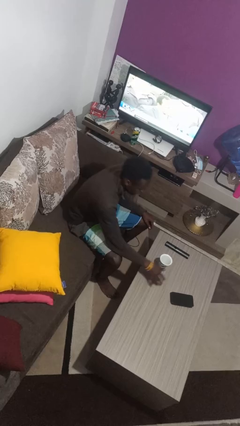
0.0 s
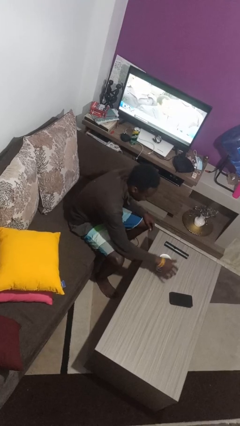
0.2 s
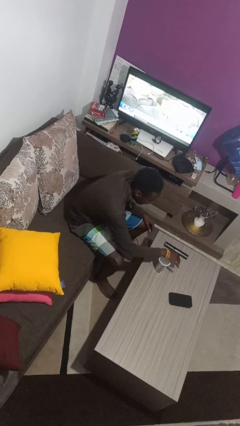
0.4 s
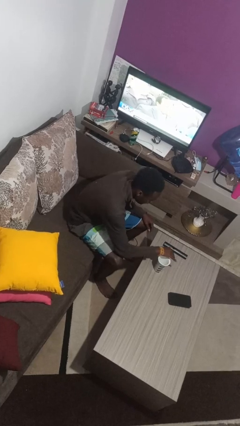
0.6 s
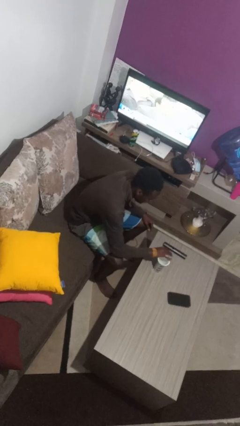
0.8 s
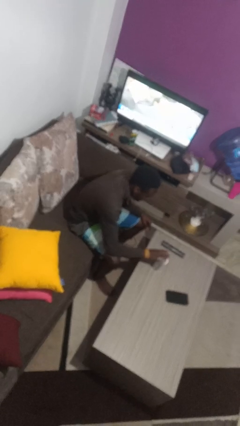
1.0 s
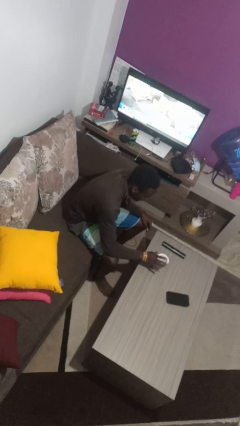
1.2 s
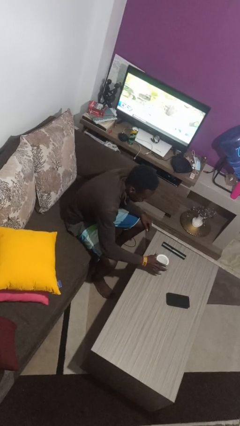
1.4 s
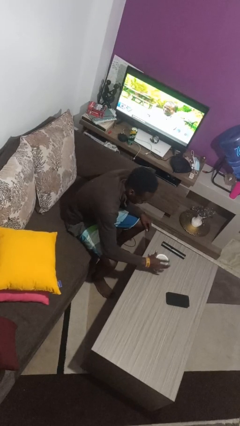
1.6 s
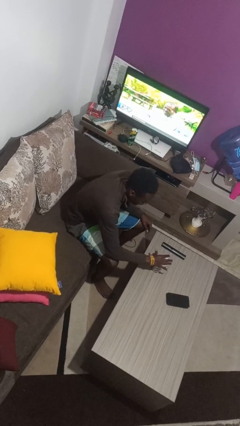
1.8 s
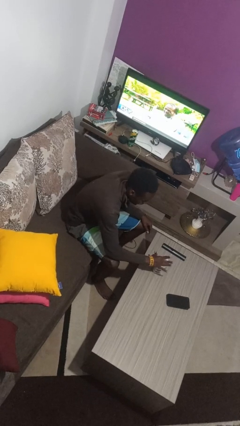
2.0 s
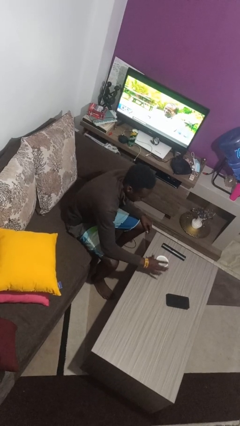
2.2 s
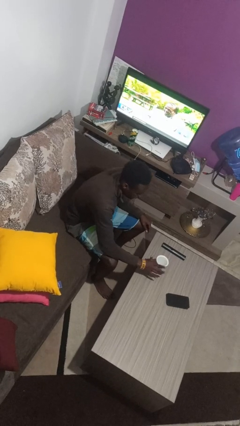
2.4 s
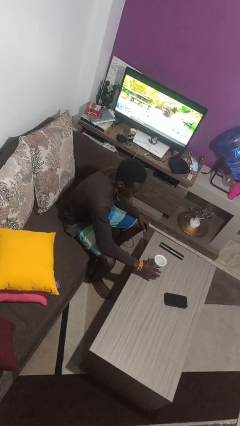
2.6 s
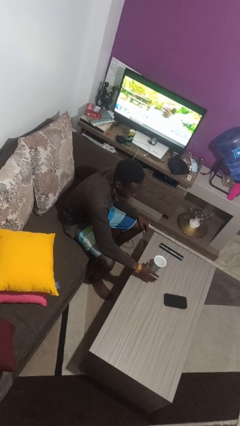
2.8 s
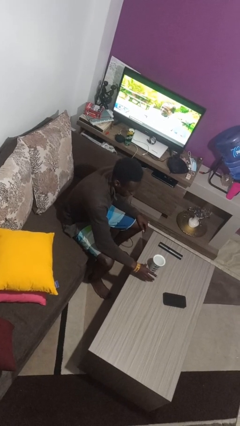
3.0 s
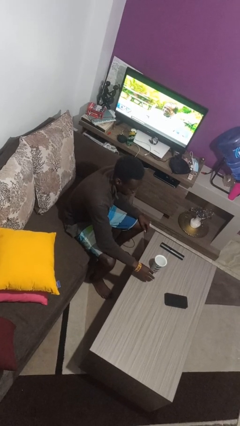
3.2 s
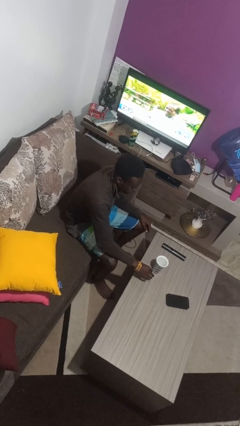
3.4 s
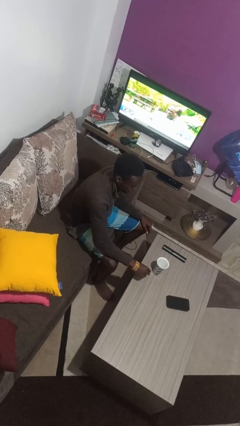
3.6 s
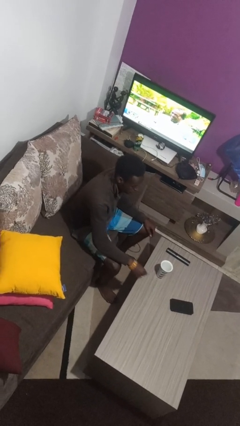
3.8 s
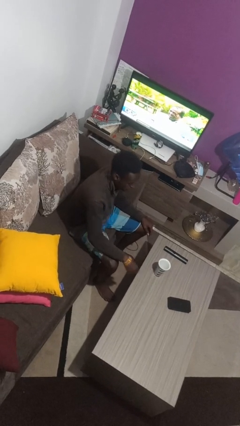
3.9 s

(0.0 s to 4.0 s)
person waves hand over object

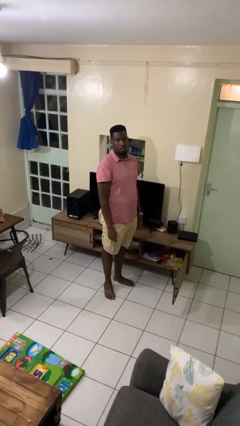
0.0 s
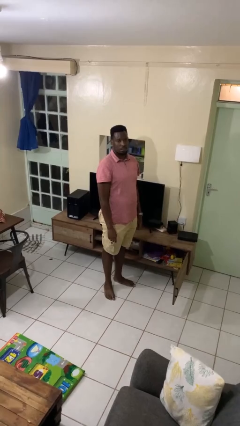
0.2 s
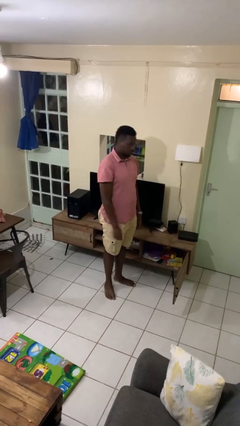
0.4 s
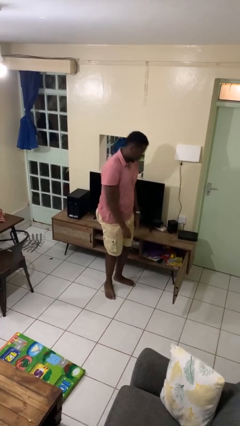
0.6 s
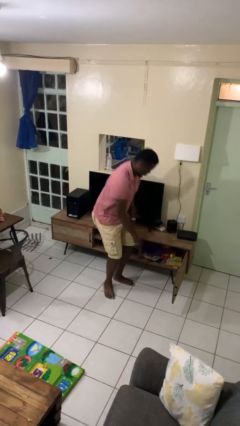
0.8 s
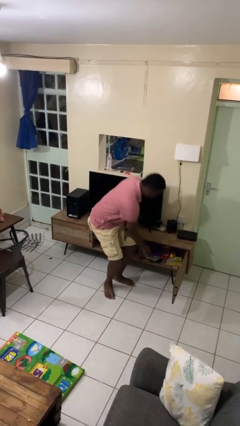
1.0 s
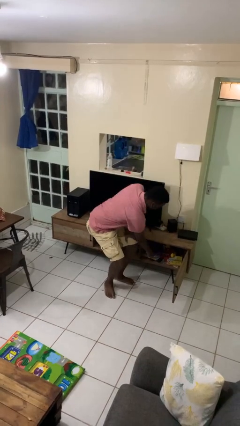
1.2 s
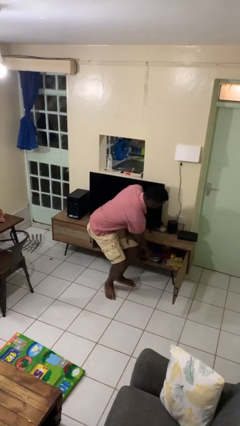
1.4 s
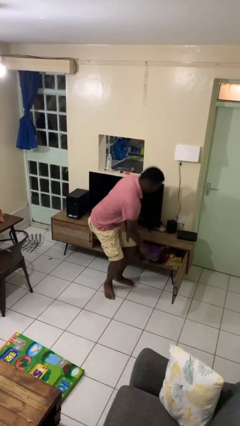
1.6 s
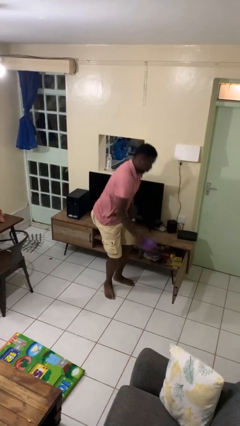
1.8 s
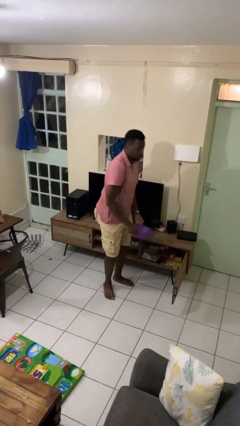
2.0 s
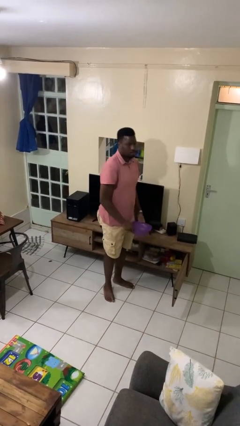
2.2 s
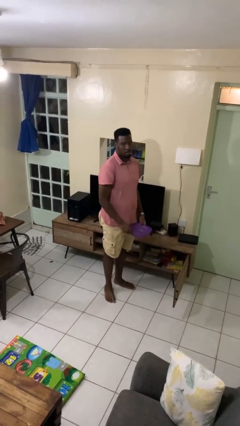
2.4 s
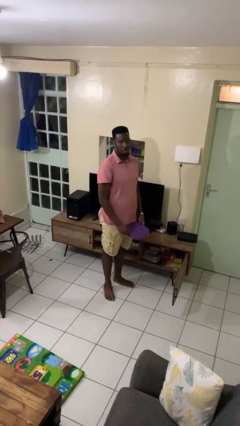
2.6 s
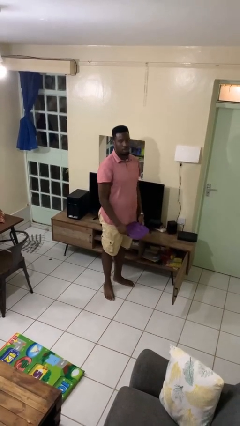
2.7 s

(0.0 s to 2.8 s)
person picks up object from cabinet

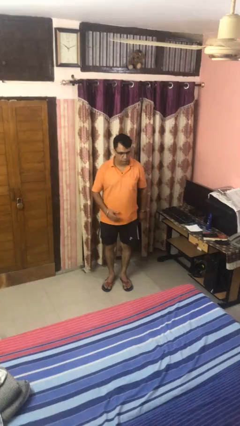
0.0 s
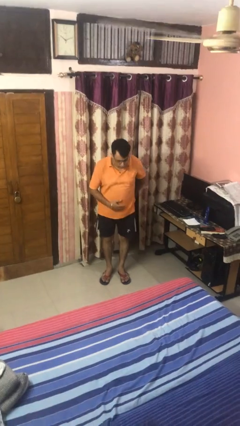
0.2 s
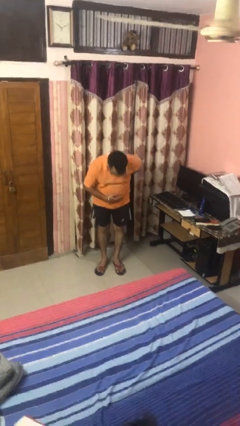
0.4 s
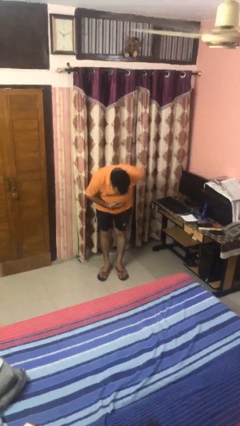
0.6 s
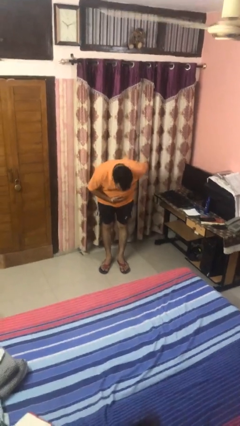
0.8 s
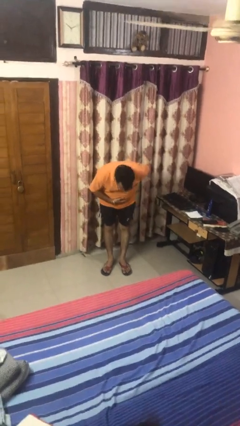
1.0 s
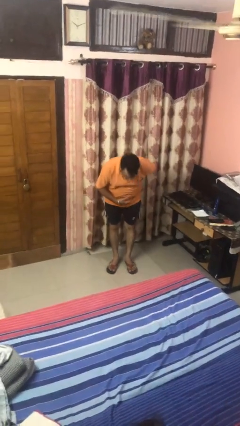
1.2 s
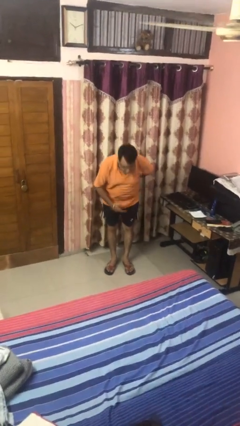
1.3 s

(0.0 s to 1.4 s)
person bows

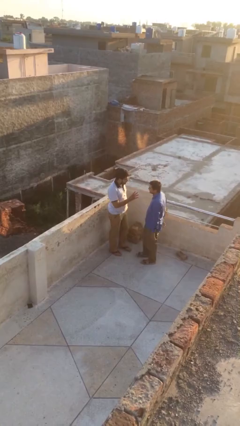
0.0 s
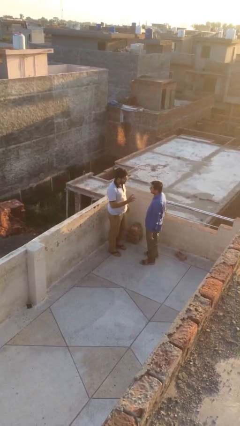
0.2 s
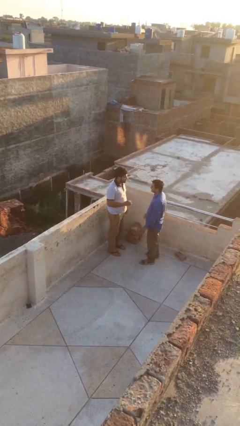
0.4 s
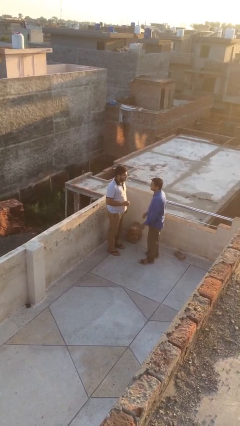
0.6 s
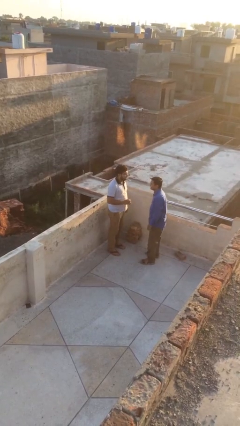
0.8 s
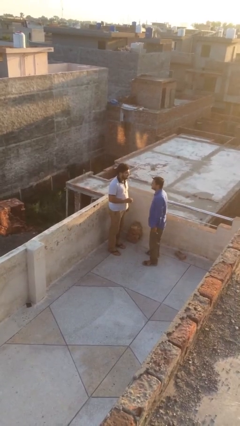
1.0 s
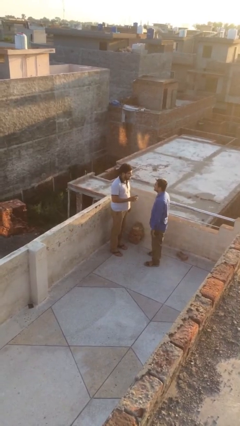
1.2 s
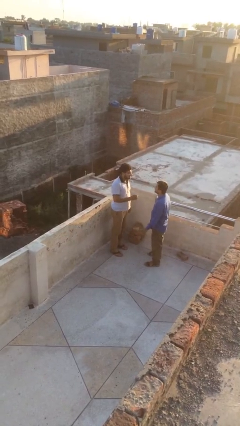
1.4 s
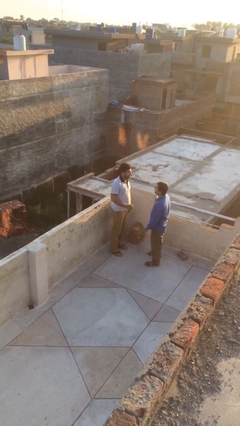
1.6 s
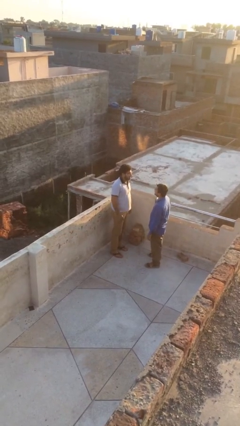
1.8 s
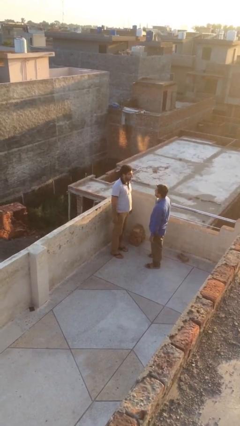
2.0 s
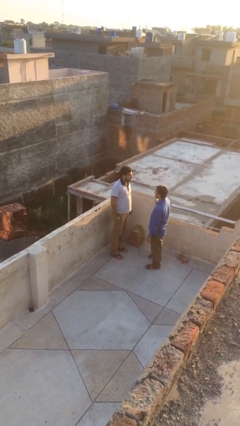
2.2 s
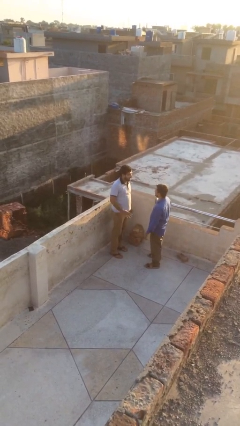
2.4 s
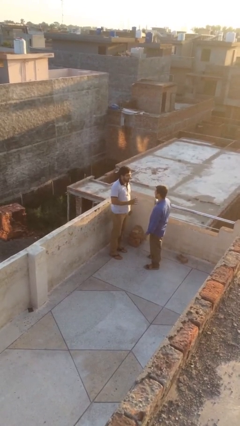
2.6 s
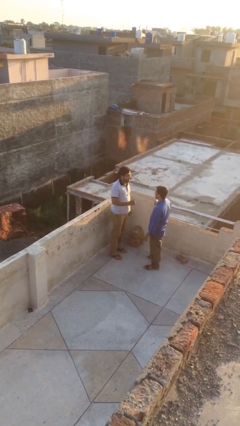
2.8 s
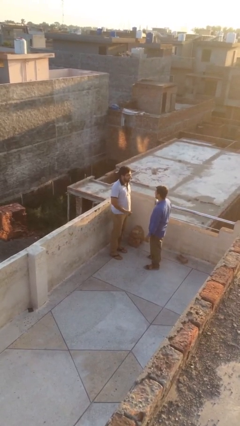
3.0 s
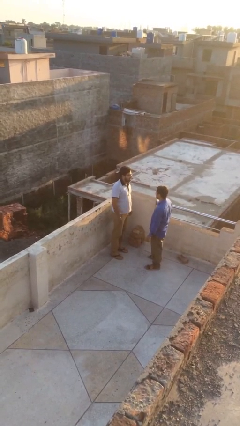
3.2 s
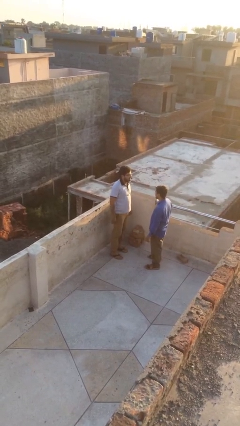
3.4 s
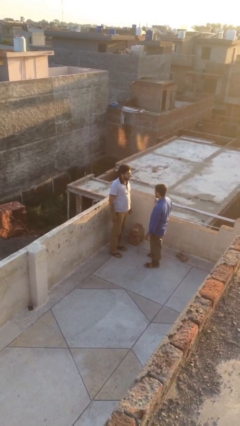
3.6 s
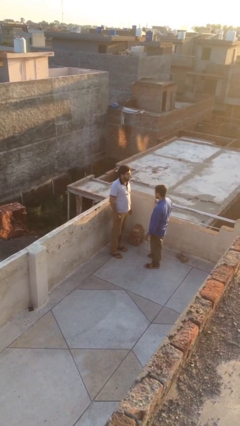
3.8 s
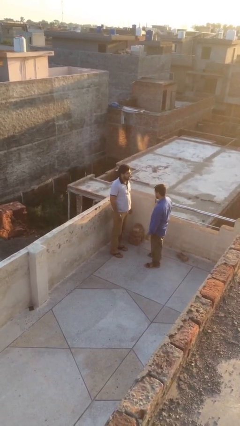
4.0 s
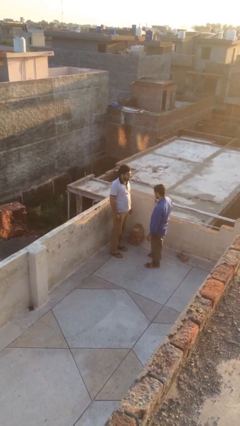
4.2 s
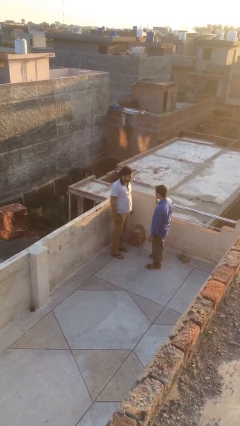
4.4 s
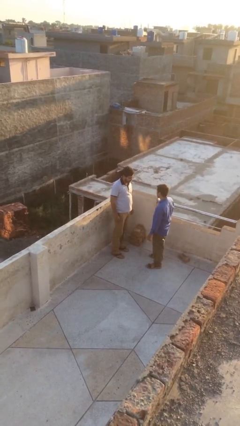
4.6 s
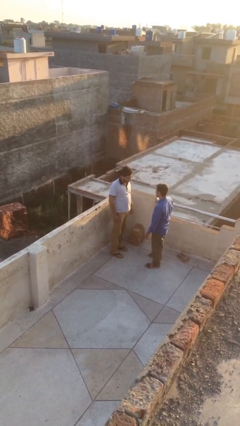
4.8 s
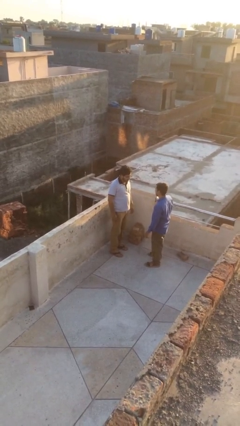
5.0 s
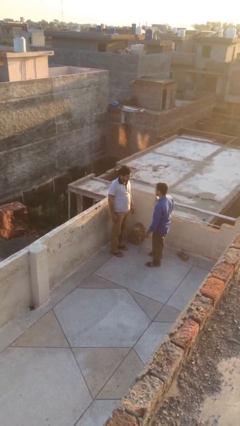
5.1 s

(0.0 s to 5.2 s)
person talks to person

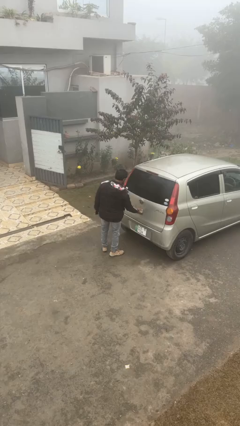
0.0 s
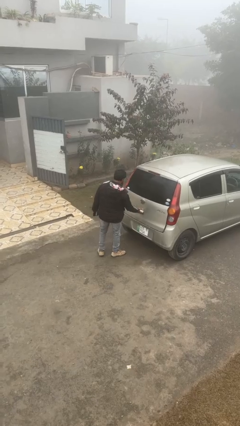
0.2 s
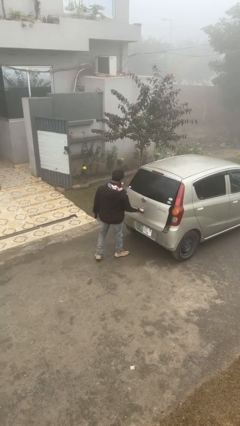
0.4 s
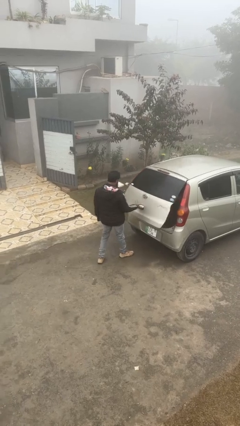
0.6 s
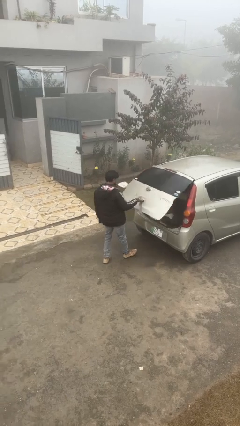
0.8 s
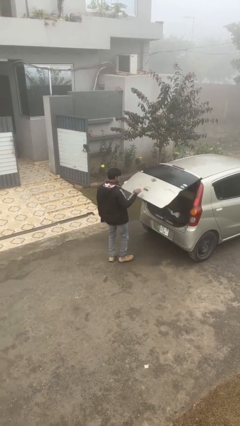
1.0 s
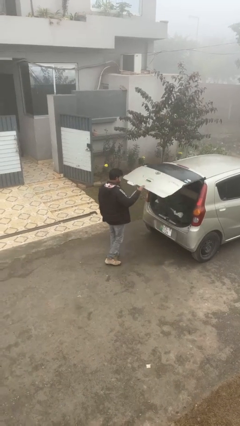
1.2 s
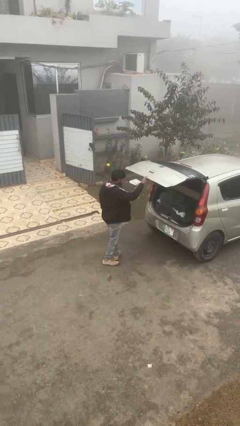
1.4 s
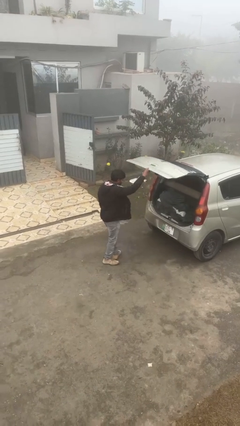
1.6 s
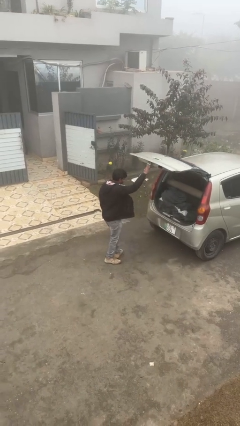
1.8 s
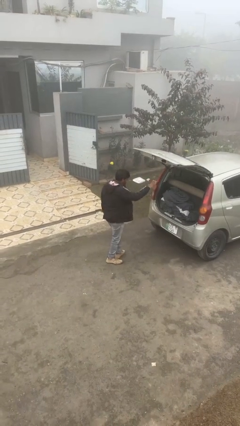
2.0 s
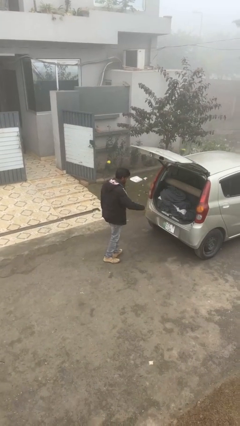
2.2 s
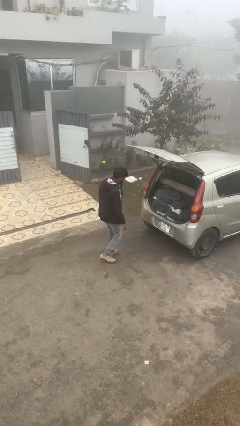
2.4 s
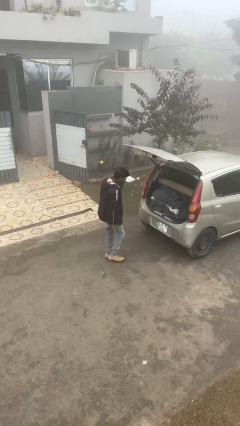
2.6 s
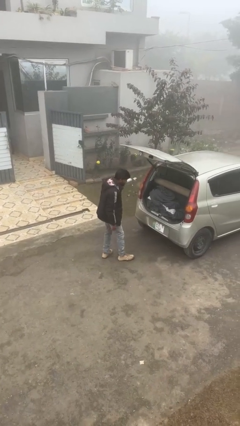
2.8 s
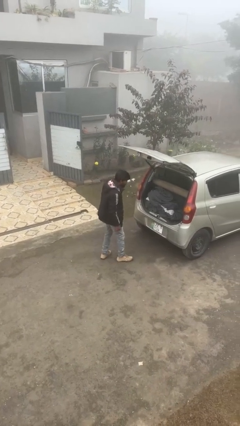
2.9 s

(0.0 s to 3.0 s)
person opens car trunk

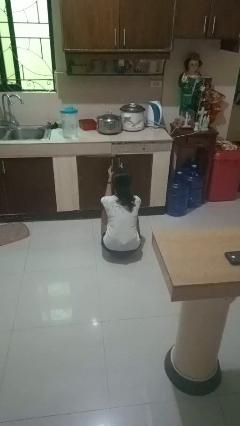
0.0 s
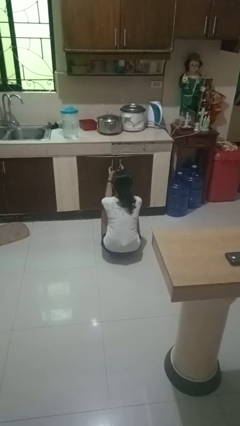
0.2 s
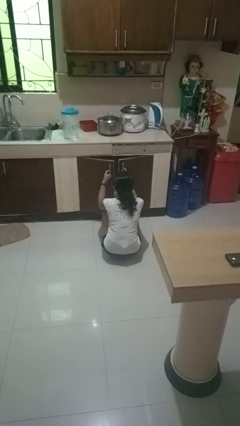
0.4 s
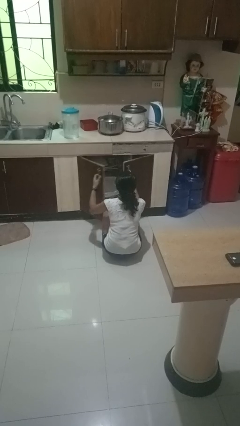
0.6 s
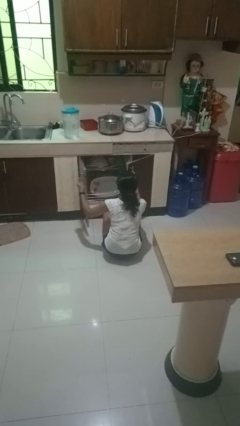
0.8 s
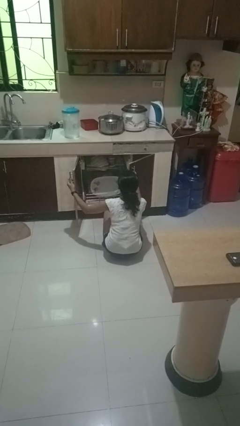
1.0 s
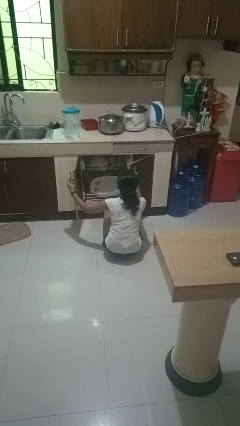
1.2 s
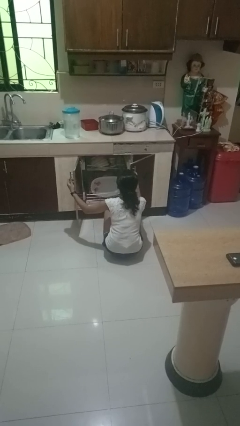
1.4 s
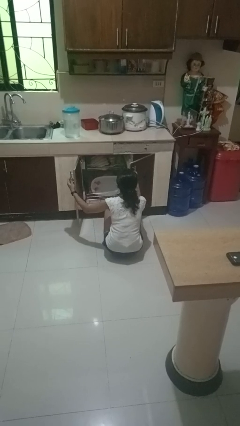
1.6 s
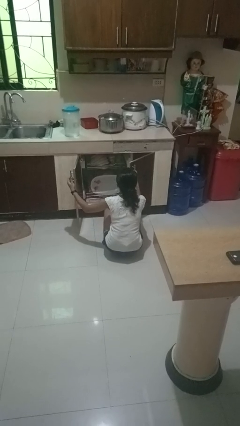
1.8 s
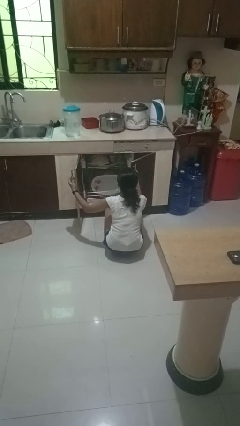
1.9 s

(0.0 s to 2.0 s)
person opens dishwasher
